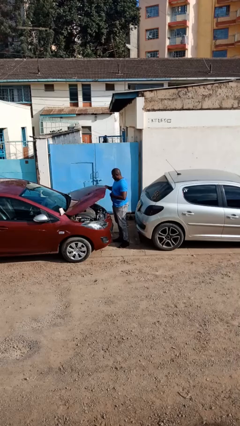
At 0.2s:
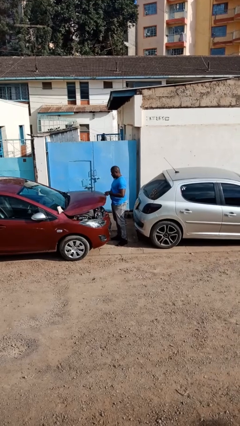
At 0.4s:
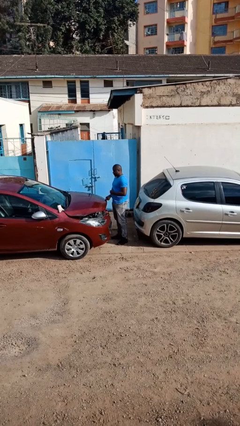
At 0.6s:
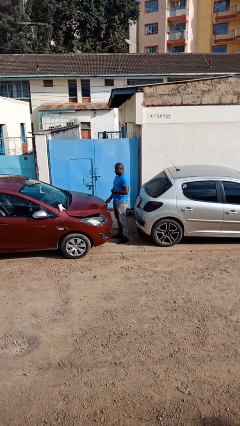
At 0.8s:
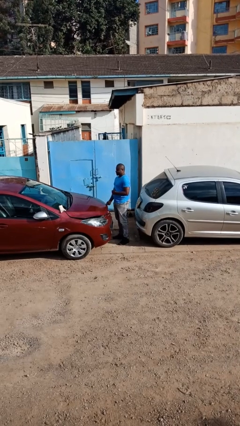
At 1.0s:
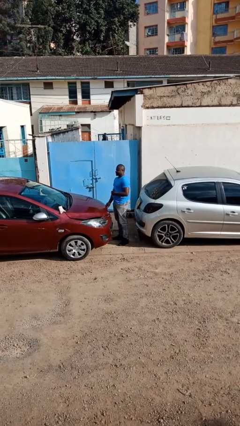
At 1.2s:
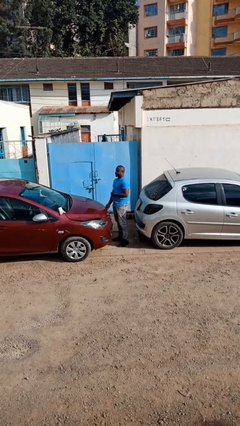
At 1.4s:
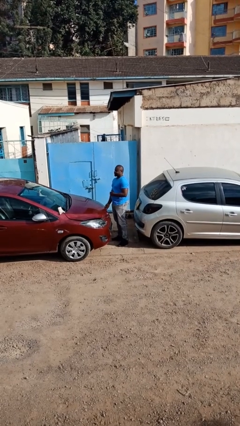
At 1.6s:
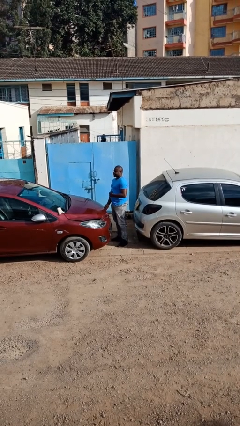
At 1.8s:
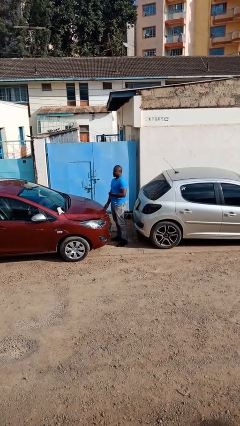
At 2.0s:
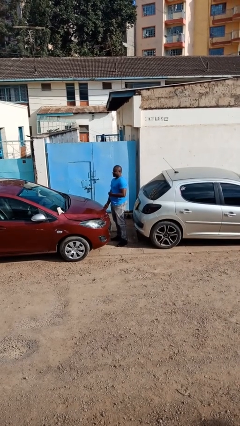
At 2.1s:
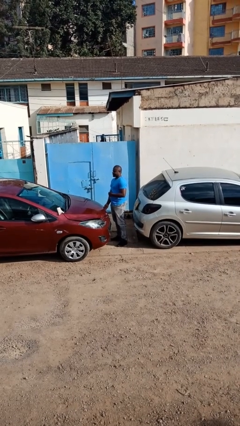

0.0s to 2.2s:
person closes car hood

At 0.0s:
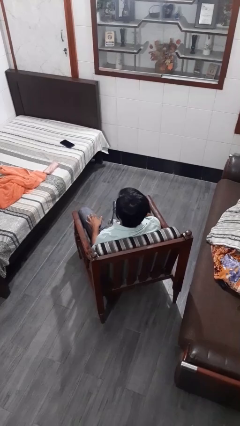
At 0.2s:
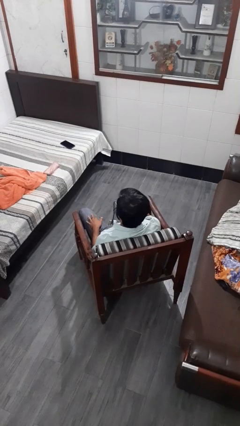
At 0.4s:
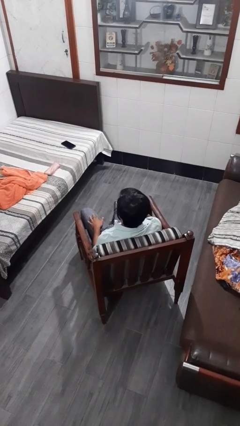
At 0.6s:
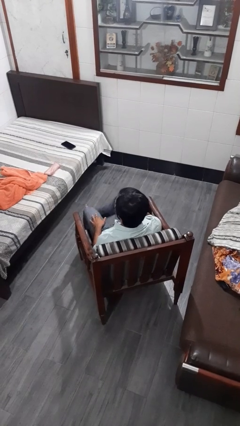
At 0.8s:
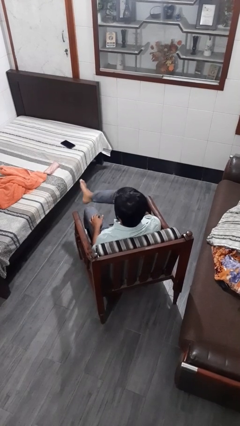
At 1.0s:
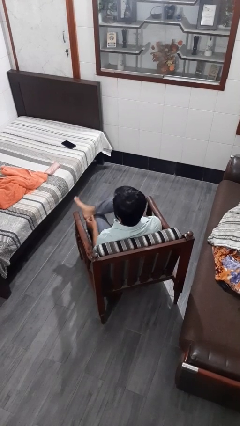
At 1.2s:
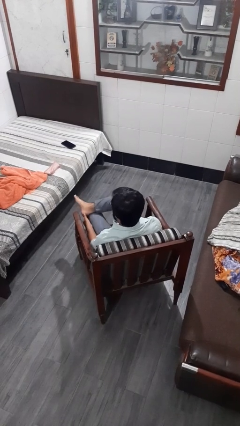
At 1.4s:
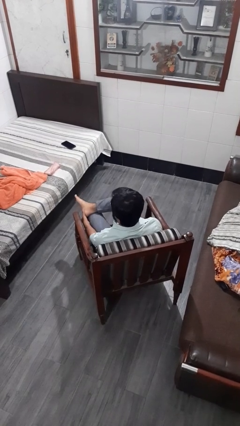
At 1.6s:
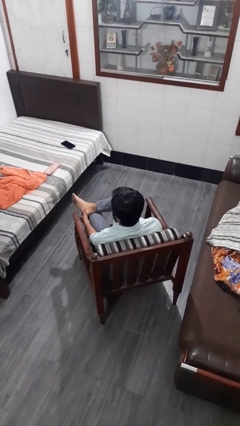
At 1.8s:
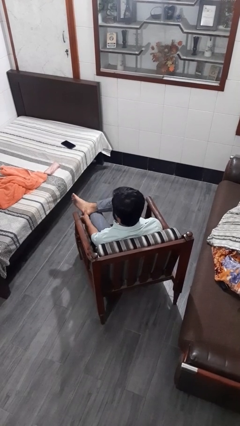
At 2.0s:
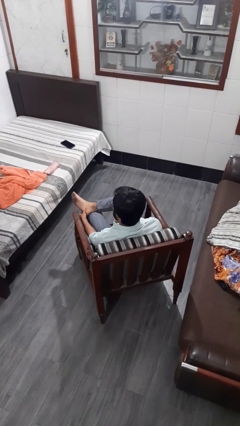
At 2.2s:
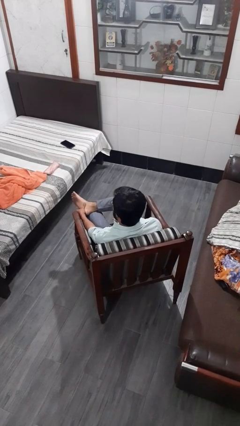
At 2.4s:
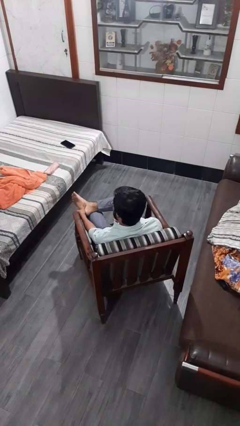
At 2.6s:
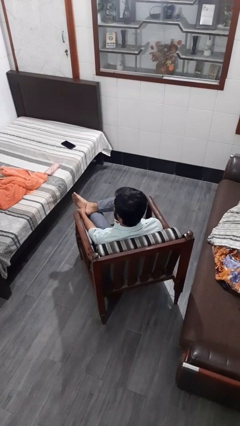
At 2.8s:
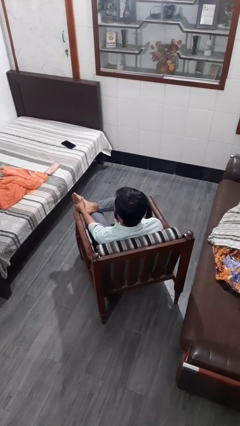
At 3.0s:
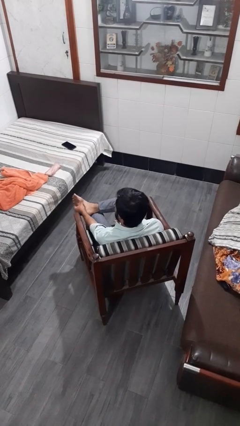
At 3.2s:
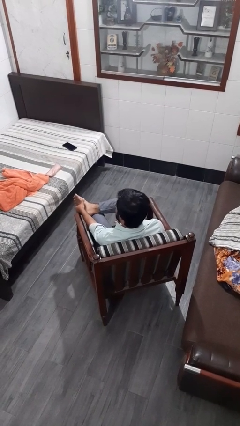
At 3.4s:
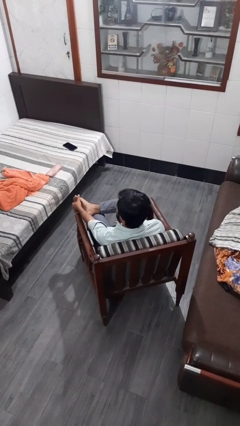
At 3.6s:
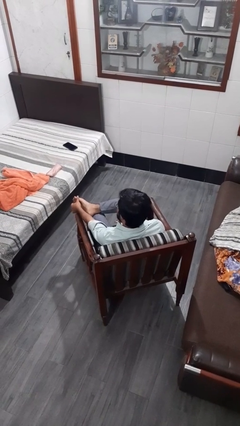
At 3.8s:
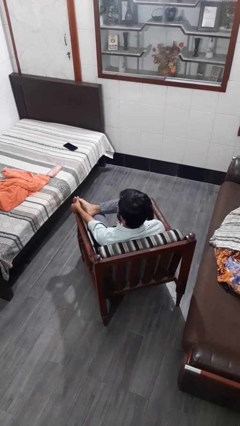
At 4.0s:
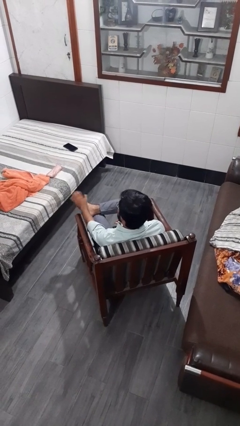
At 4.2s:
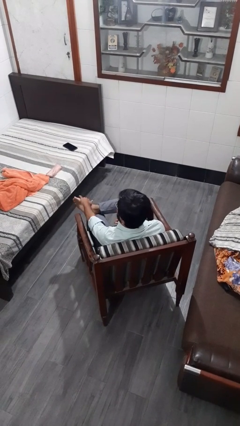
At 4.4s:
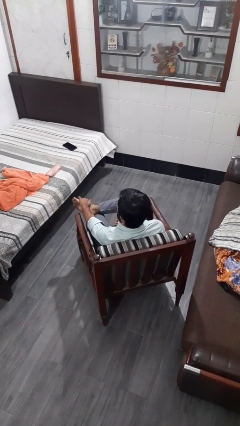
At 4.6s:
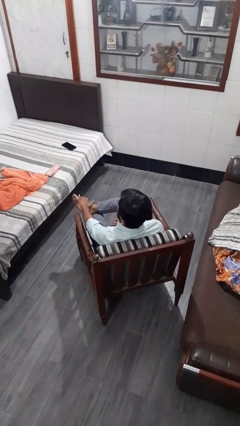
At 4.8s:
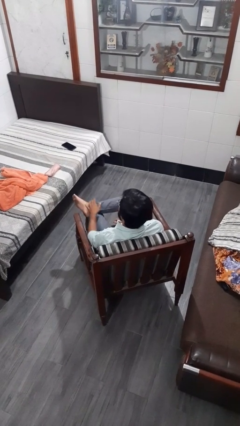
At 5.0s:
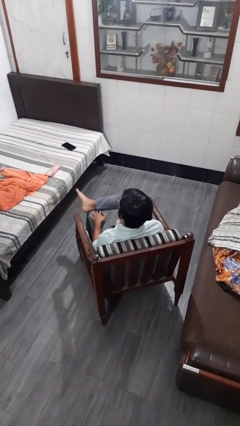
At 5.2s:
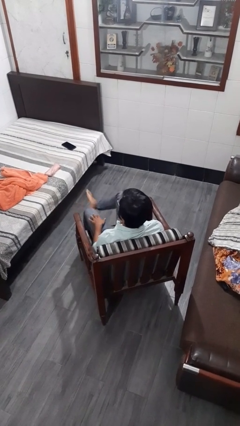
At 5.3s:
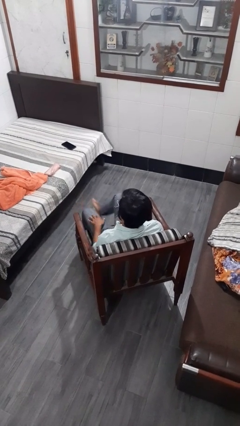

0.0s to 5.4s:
person rubs foot

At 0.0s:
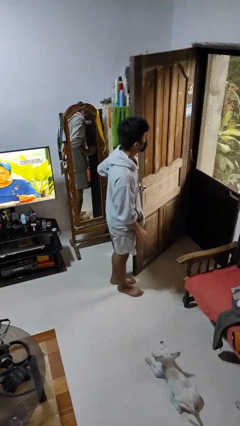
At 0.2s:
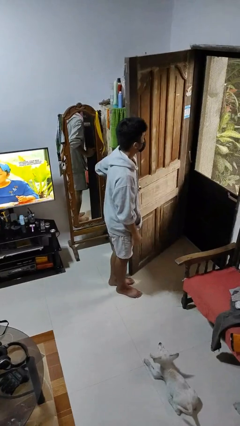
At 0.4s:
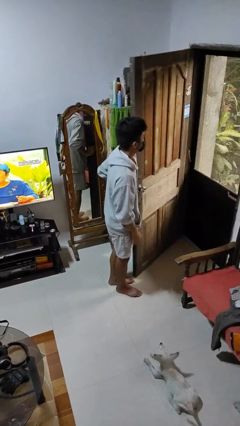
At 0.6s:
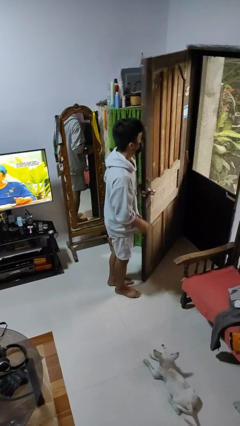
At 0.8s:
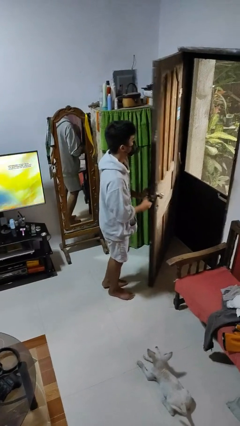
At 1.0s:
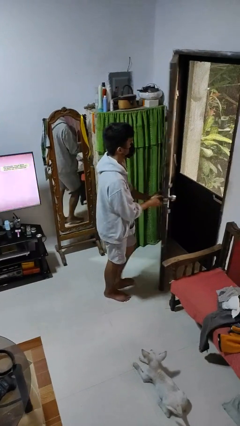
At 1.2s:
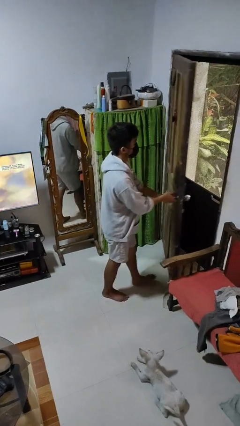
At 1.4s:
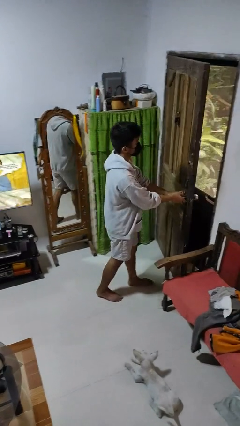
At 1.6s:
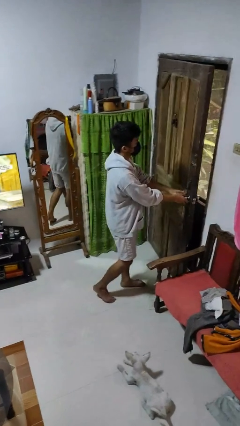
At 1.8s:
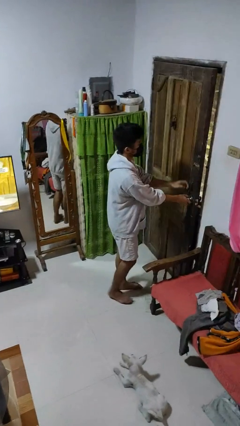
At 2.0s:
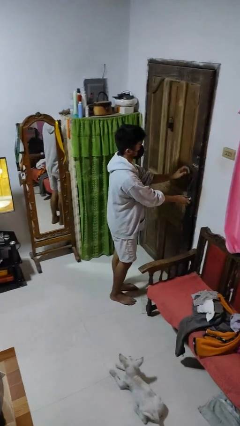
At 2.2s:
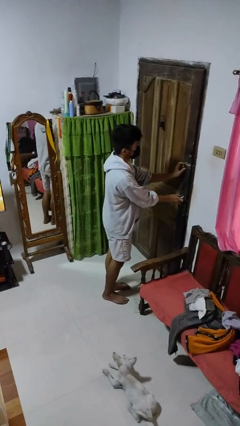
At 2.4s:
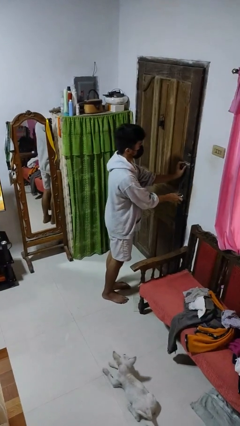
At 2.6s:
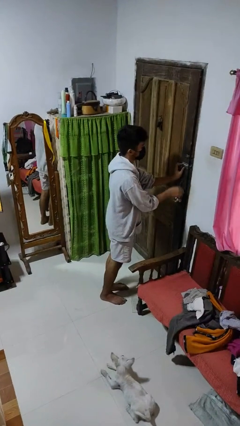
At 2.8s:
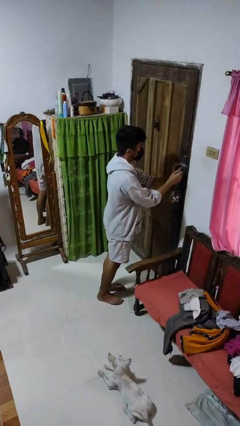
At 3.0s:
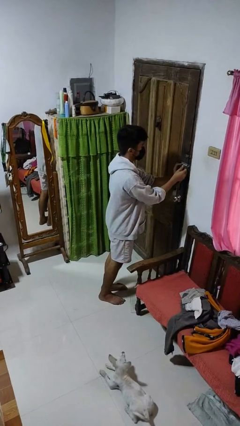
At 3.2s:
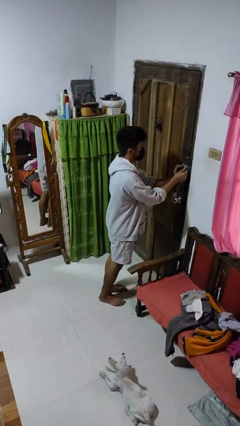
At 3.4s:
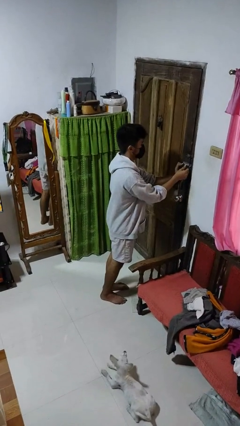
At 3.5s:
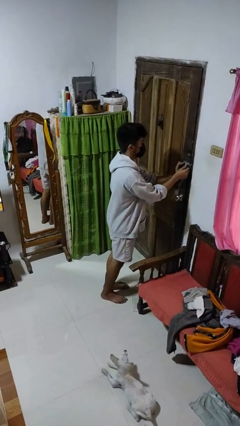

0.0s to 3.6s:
person closes facility door

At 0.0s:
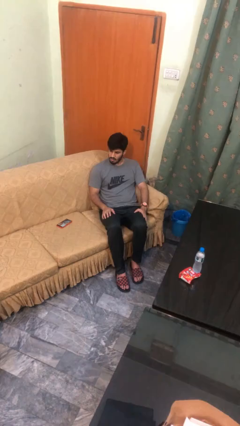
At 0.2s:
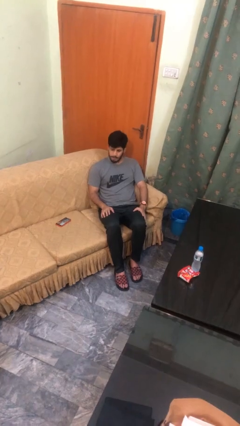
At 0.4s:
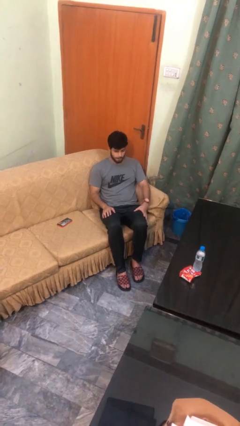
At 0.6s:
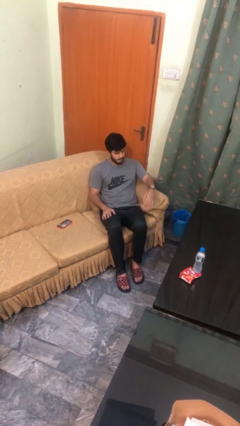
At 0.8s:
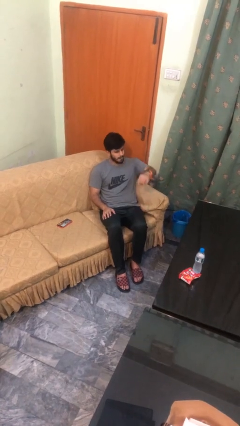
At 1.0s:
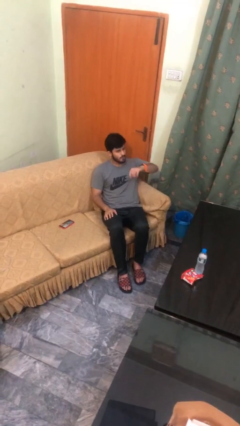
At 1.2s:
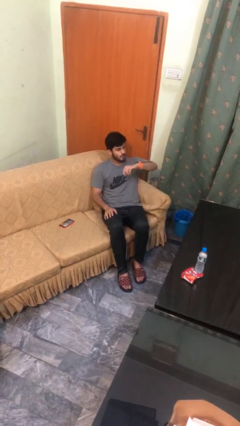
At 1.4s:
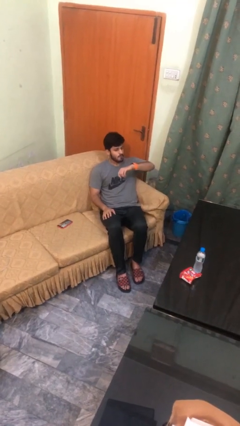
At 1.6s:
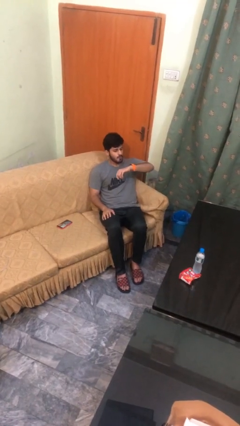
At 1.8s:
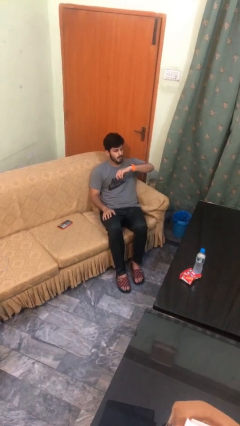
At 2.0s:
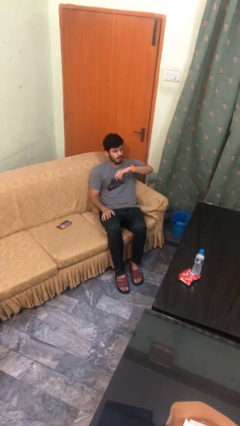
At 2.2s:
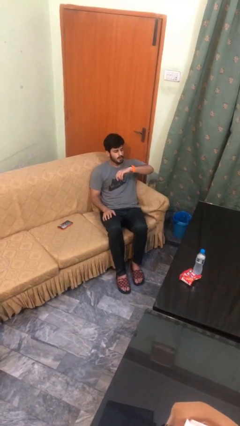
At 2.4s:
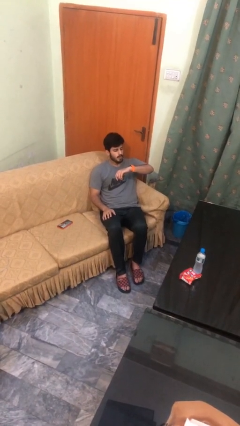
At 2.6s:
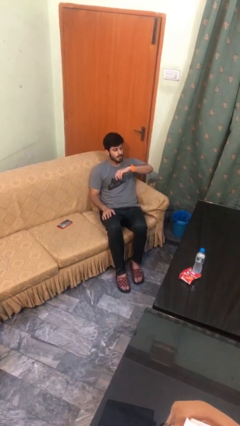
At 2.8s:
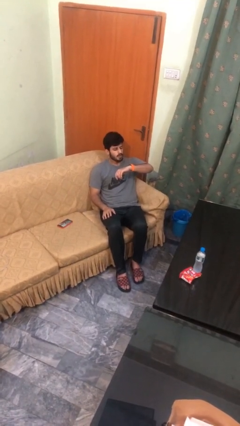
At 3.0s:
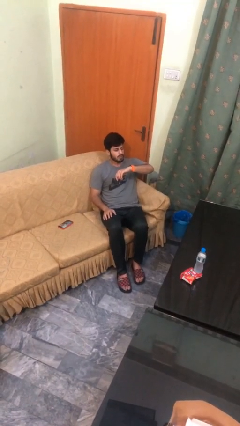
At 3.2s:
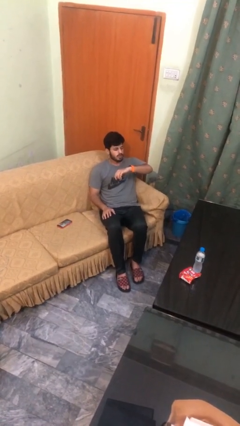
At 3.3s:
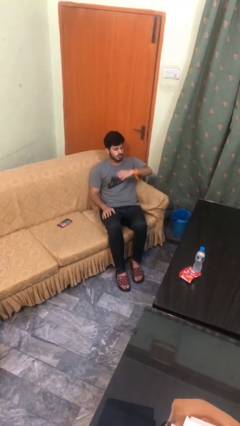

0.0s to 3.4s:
person looks at wristwatch

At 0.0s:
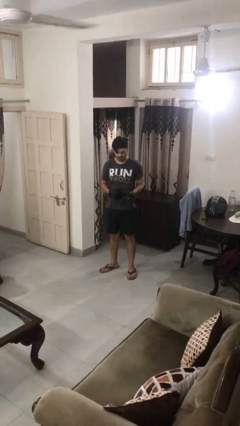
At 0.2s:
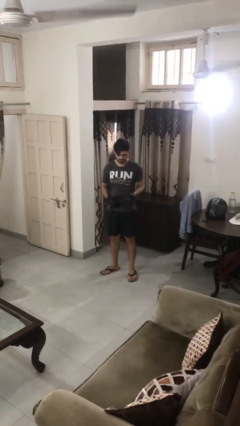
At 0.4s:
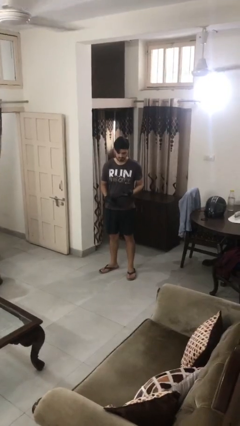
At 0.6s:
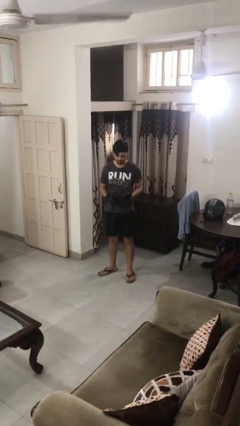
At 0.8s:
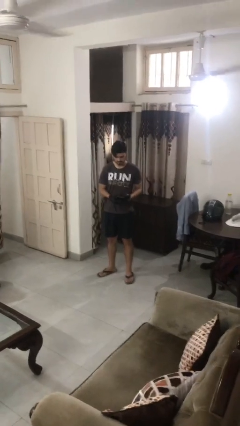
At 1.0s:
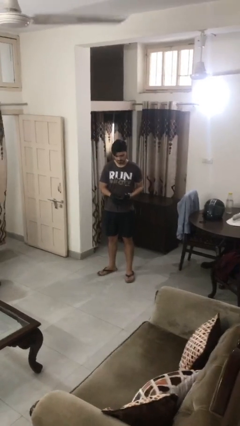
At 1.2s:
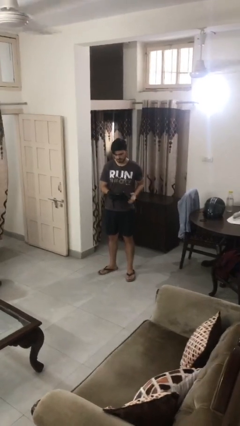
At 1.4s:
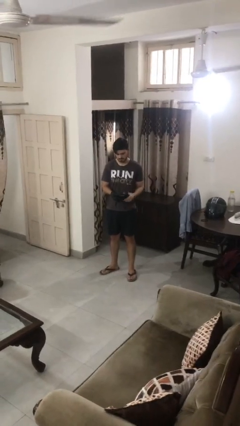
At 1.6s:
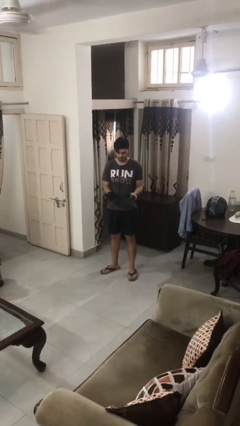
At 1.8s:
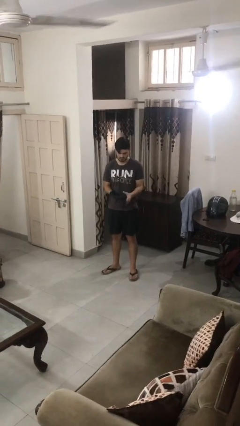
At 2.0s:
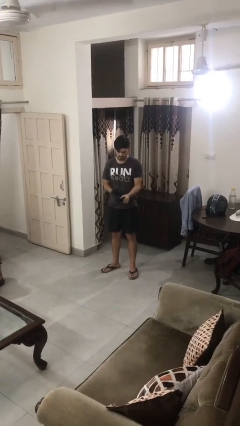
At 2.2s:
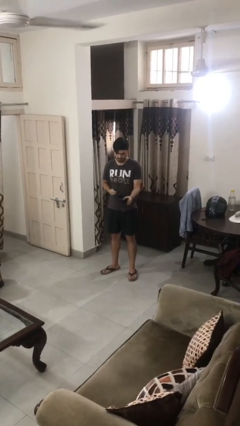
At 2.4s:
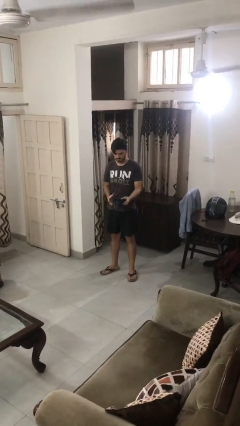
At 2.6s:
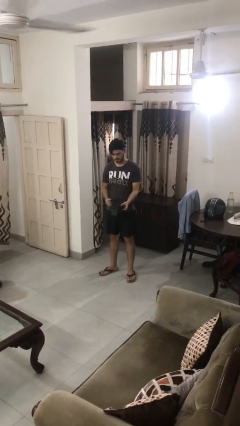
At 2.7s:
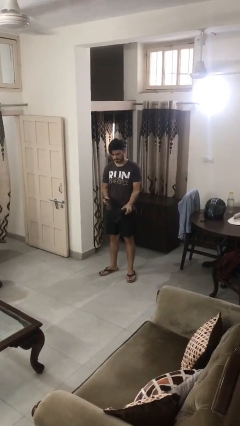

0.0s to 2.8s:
person takes off gloves

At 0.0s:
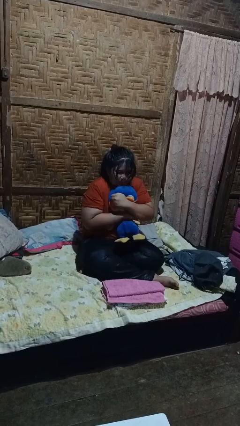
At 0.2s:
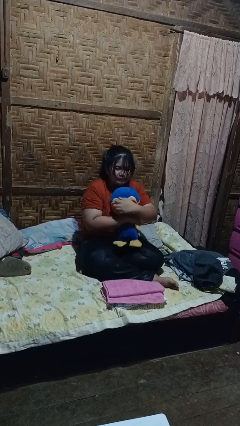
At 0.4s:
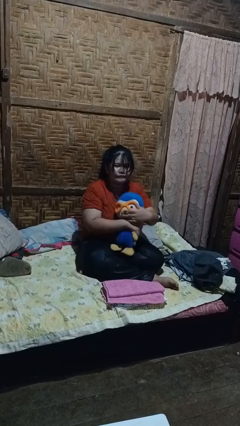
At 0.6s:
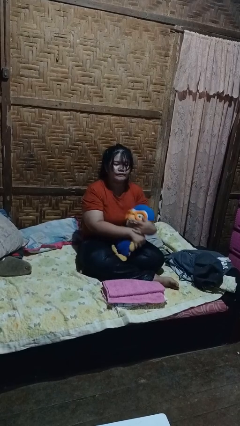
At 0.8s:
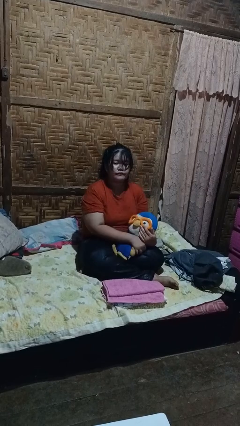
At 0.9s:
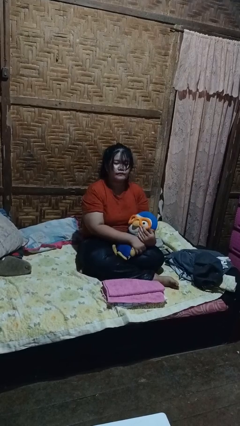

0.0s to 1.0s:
person hugs stuffed animal
